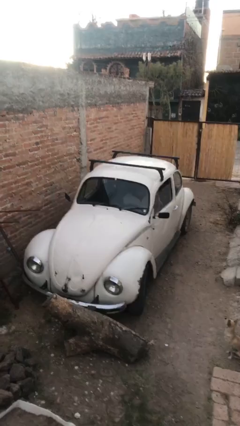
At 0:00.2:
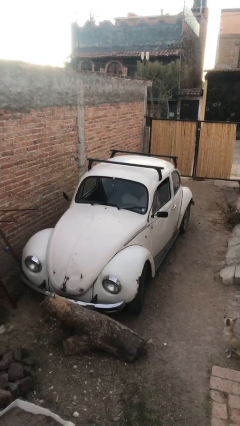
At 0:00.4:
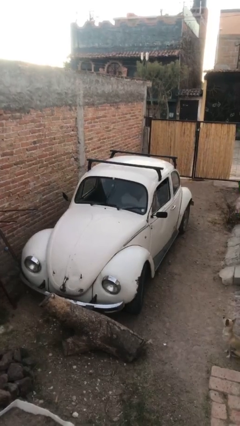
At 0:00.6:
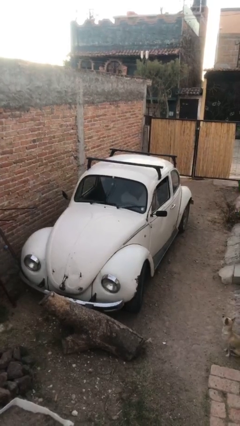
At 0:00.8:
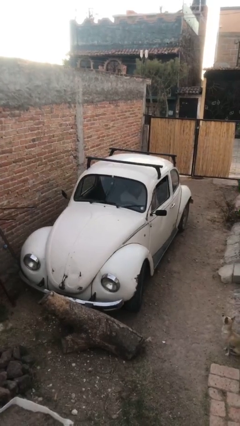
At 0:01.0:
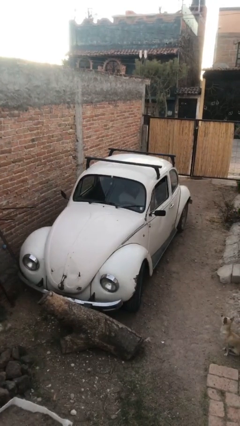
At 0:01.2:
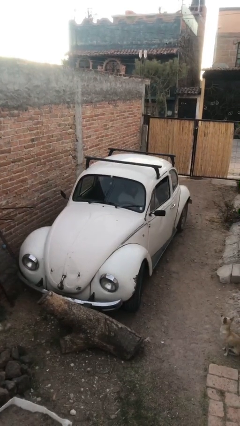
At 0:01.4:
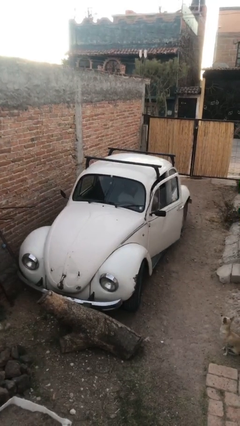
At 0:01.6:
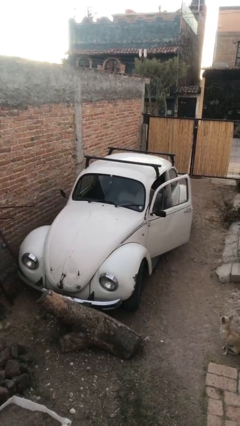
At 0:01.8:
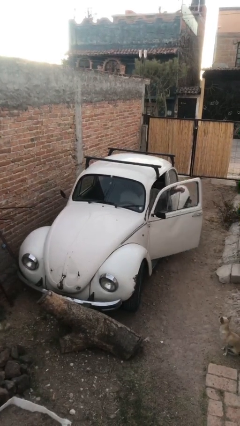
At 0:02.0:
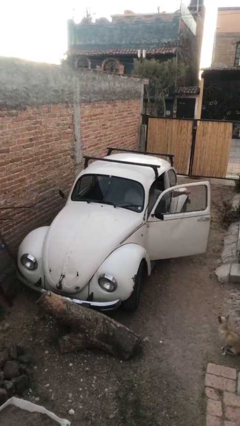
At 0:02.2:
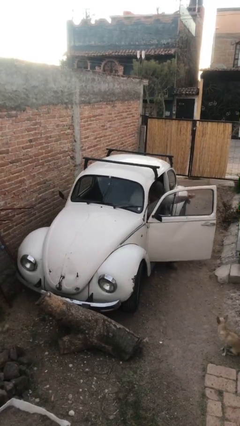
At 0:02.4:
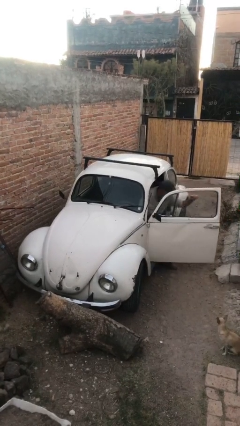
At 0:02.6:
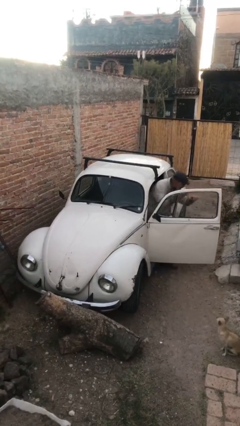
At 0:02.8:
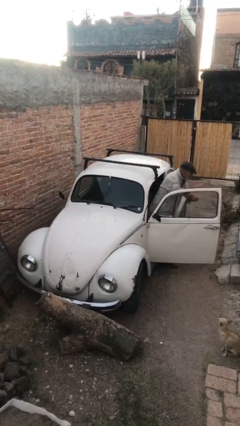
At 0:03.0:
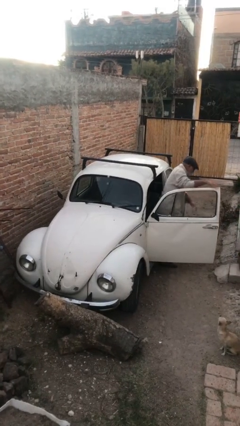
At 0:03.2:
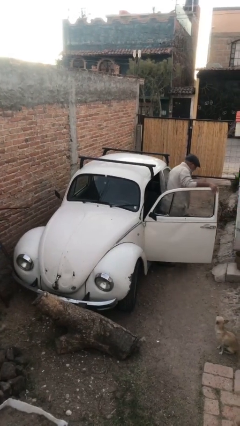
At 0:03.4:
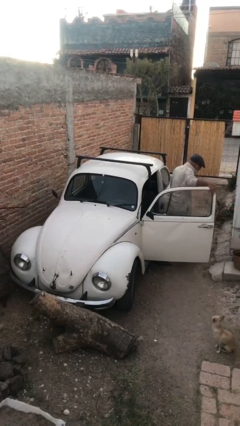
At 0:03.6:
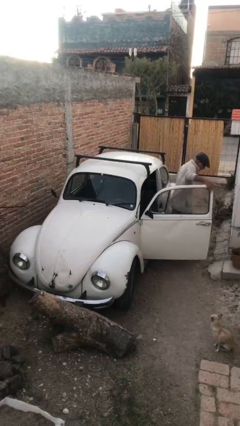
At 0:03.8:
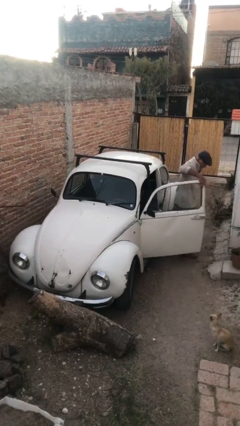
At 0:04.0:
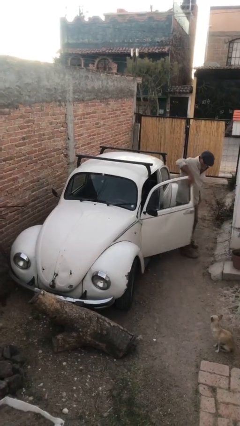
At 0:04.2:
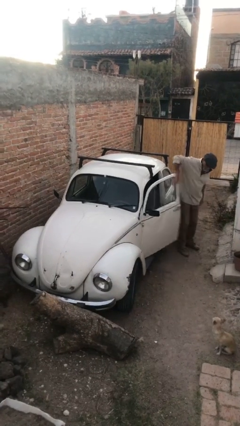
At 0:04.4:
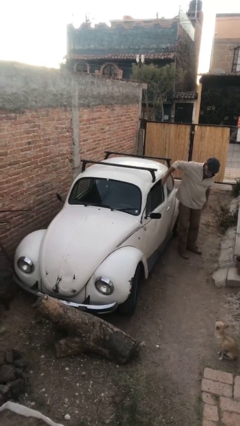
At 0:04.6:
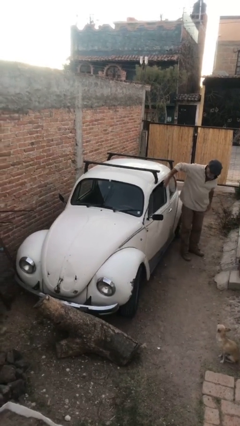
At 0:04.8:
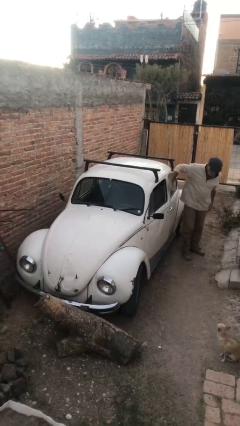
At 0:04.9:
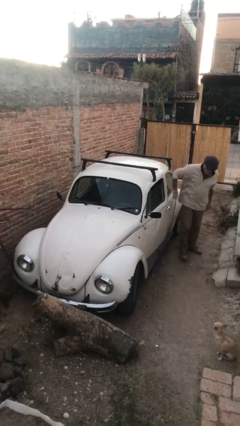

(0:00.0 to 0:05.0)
car drops off person

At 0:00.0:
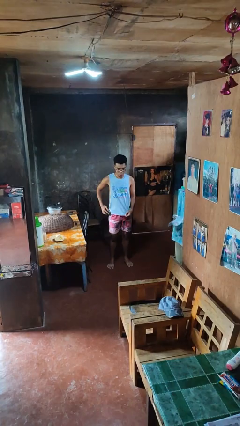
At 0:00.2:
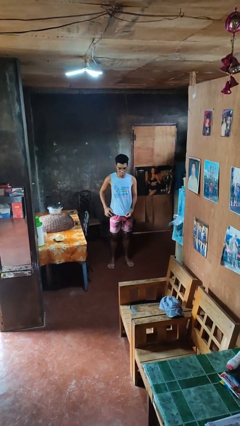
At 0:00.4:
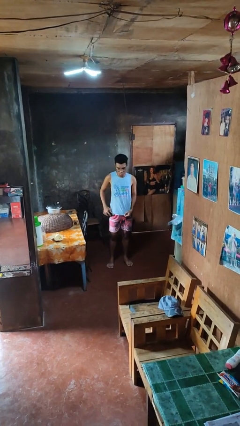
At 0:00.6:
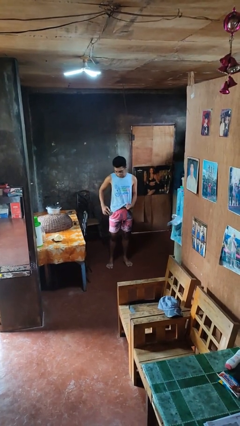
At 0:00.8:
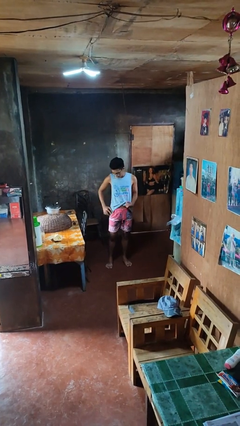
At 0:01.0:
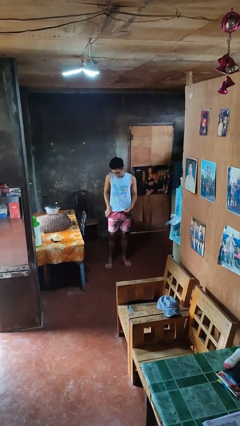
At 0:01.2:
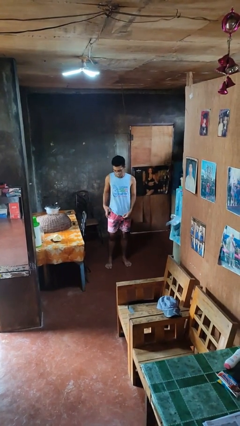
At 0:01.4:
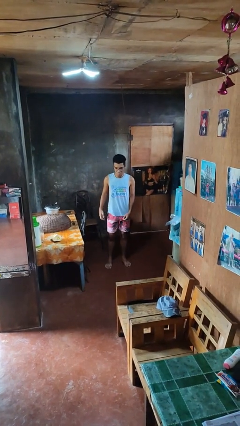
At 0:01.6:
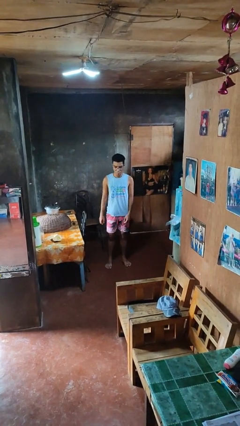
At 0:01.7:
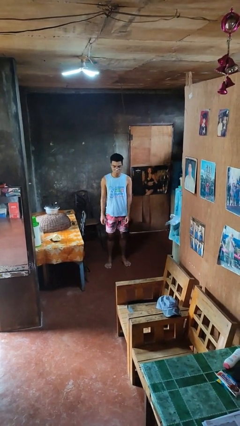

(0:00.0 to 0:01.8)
person puts phone into pocket

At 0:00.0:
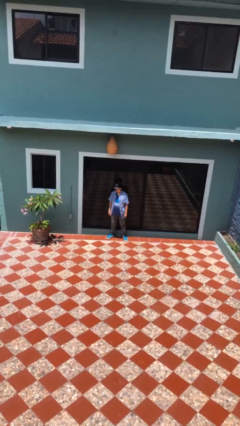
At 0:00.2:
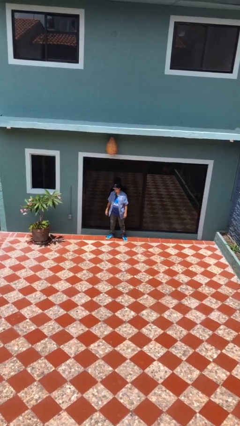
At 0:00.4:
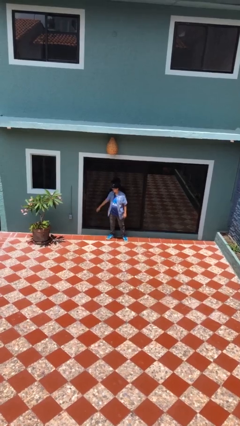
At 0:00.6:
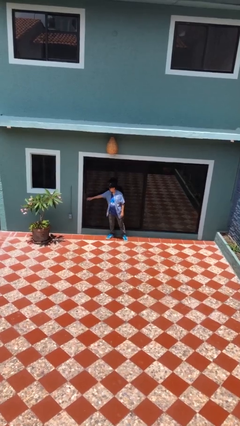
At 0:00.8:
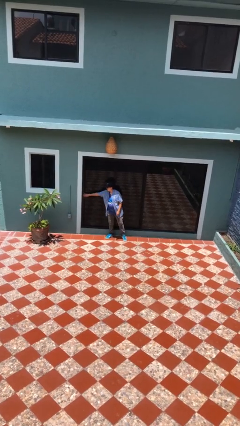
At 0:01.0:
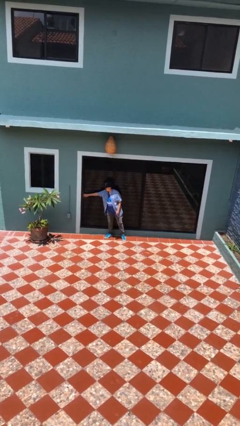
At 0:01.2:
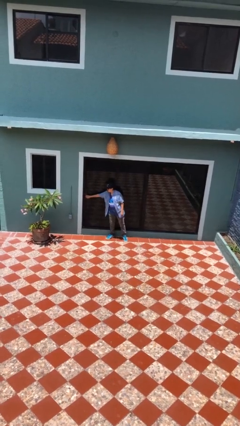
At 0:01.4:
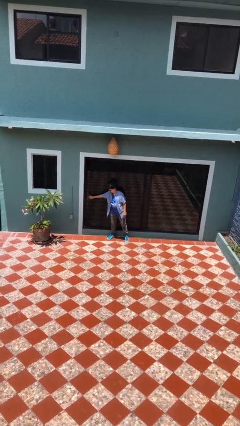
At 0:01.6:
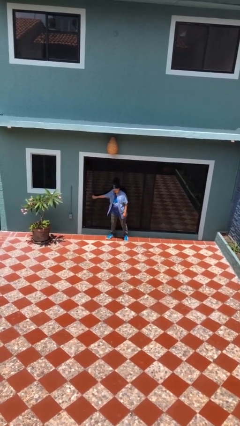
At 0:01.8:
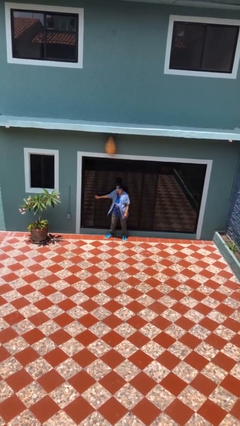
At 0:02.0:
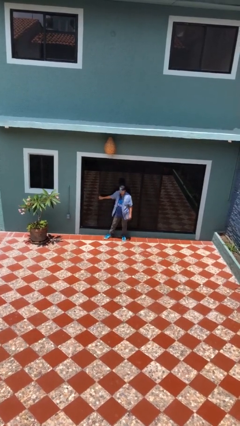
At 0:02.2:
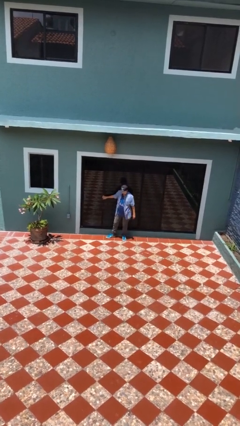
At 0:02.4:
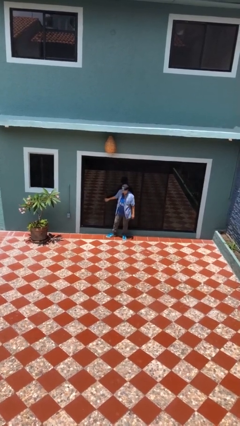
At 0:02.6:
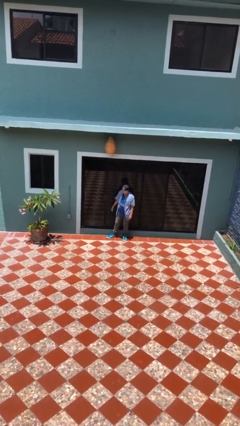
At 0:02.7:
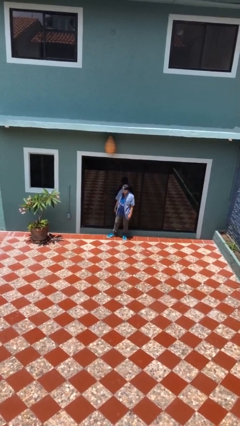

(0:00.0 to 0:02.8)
person opens sliding door

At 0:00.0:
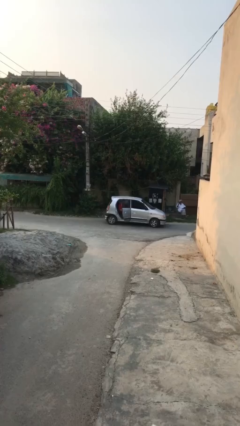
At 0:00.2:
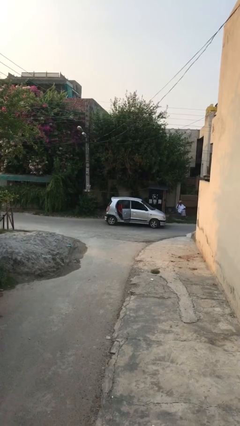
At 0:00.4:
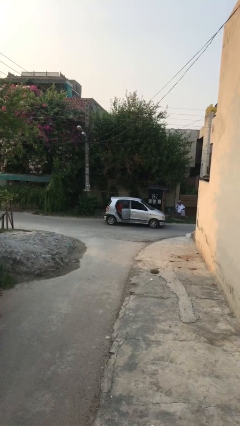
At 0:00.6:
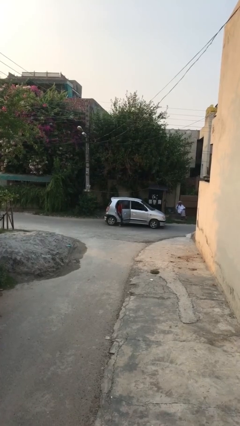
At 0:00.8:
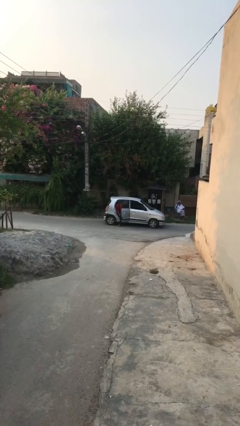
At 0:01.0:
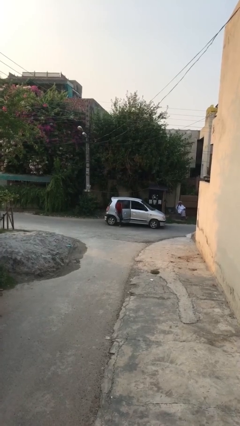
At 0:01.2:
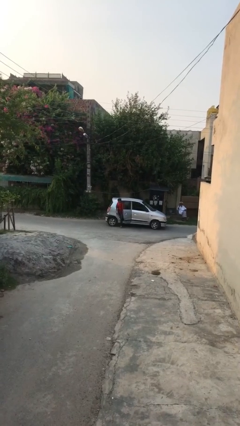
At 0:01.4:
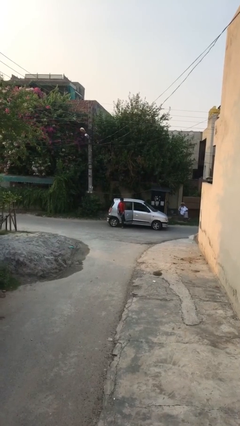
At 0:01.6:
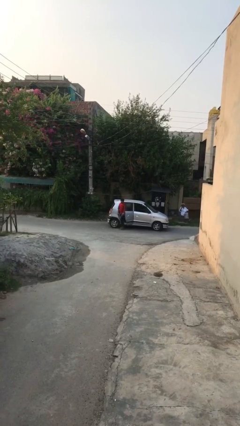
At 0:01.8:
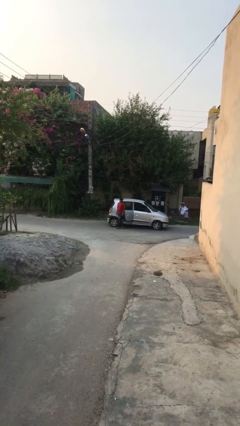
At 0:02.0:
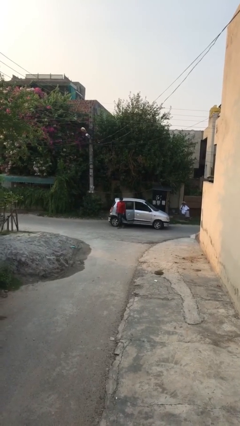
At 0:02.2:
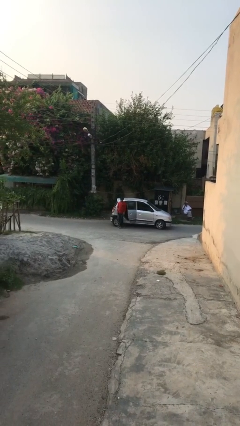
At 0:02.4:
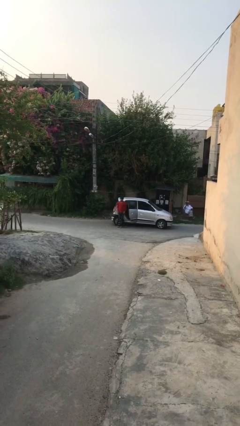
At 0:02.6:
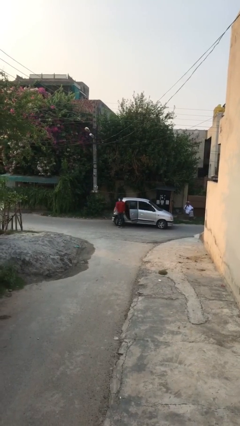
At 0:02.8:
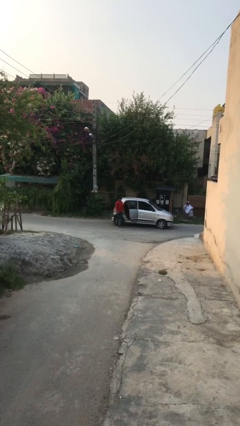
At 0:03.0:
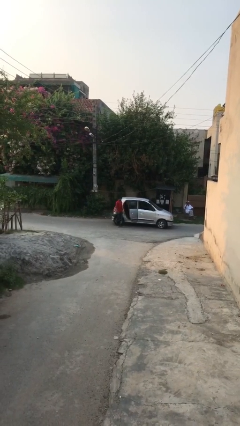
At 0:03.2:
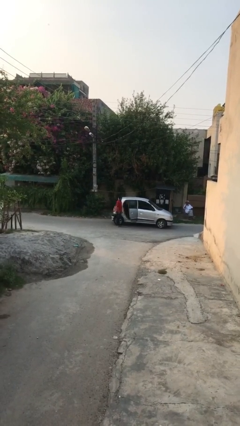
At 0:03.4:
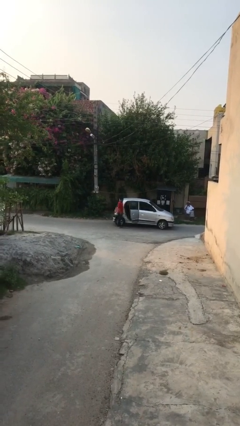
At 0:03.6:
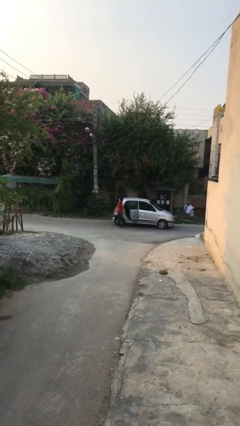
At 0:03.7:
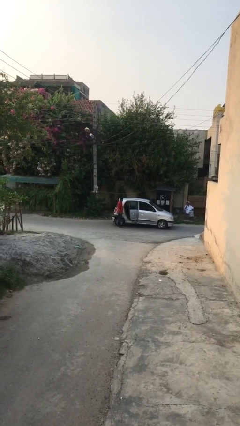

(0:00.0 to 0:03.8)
person exits car

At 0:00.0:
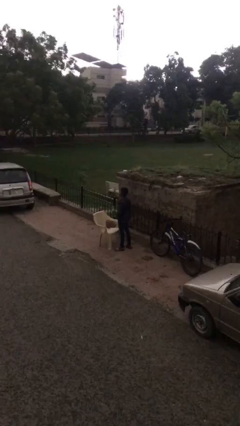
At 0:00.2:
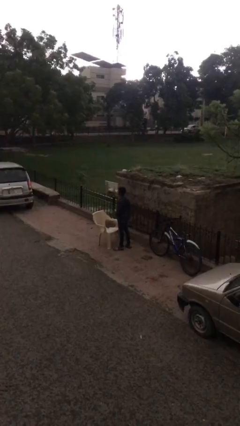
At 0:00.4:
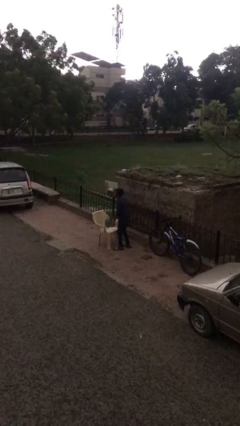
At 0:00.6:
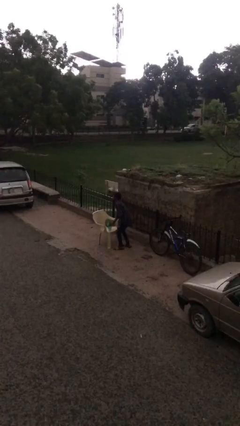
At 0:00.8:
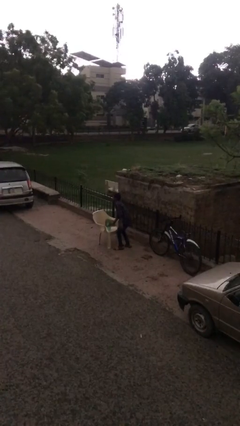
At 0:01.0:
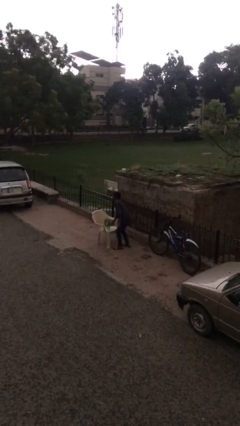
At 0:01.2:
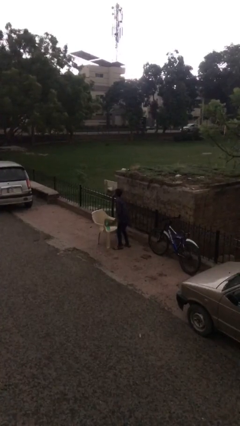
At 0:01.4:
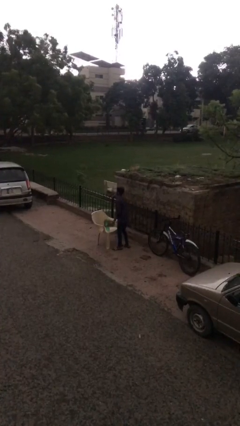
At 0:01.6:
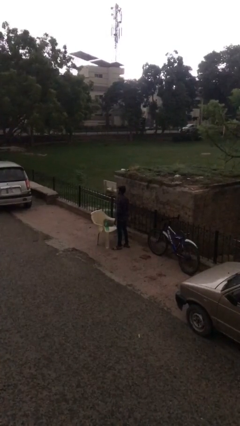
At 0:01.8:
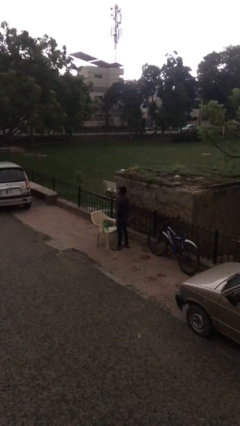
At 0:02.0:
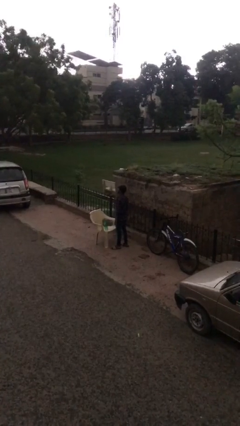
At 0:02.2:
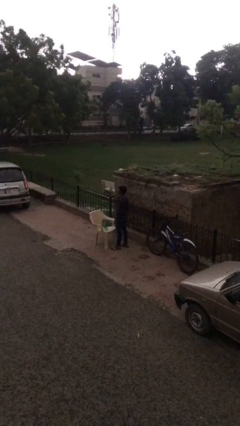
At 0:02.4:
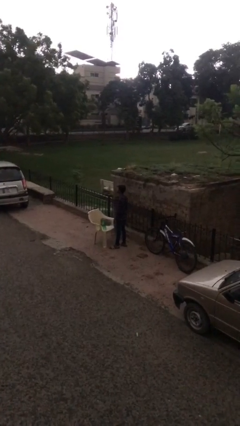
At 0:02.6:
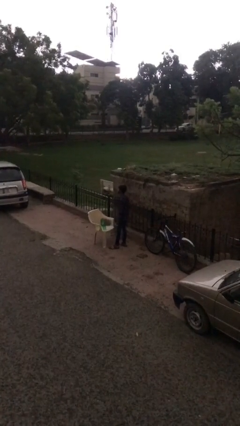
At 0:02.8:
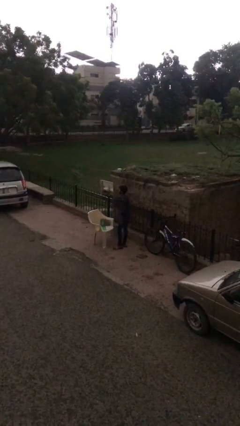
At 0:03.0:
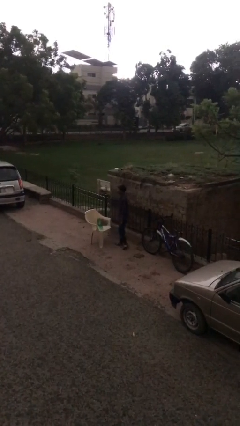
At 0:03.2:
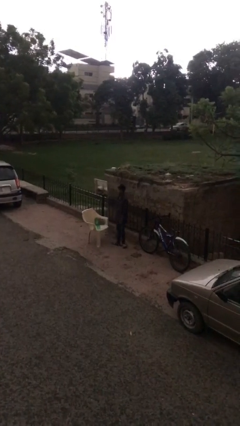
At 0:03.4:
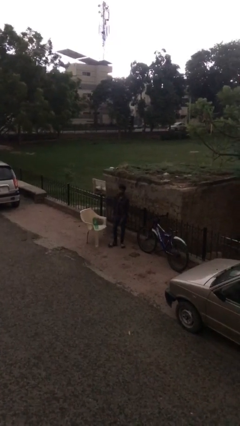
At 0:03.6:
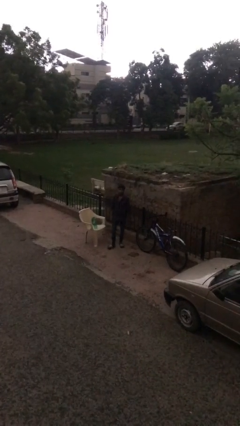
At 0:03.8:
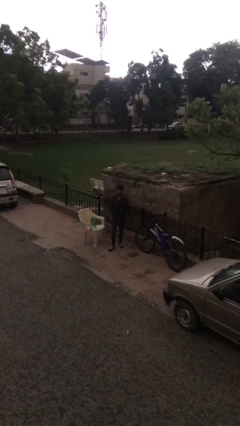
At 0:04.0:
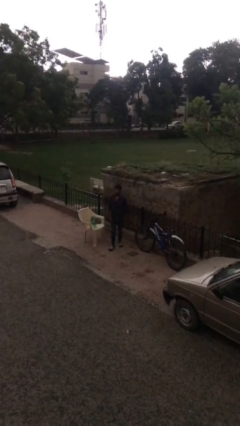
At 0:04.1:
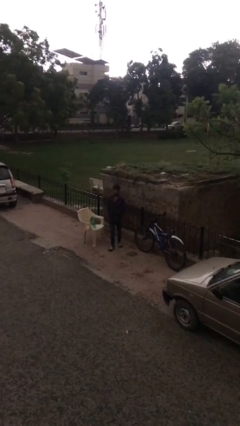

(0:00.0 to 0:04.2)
person puts down object on table
